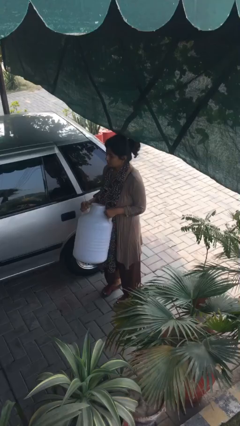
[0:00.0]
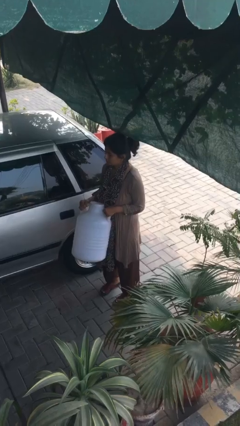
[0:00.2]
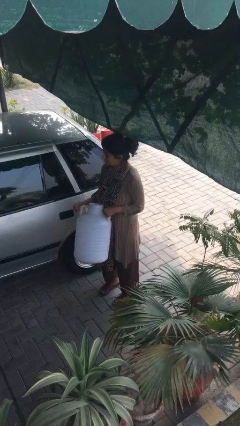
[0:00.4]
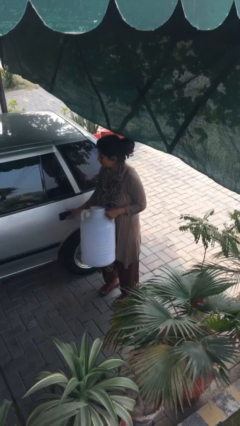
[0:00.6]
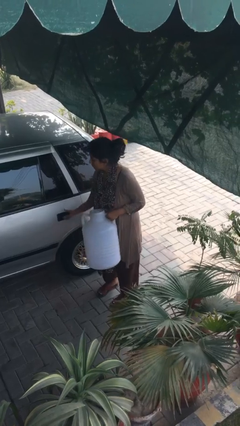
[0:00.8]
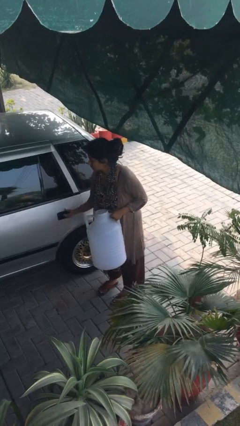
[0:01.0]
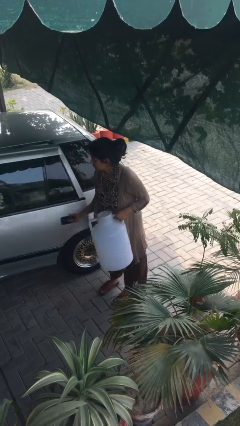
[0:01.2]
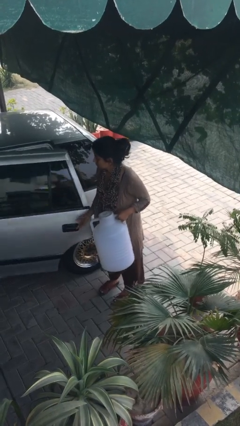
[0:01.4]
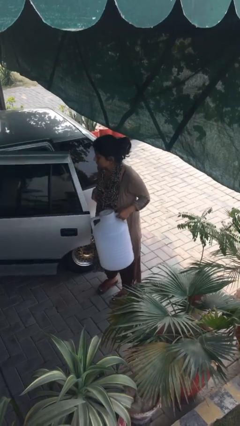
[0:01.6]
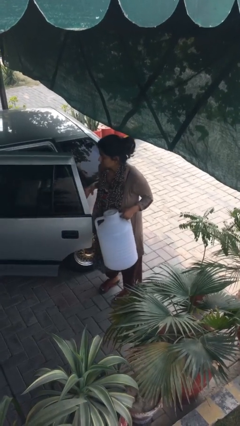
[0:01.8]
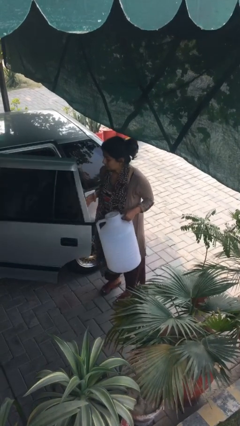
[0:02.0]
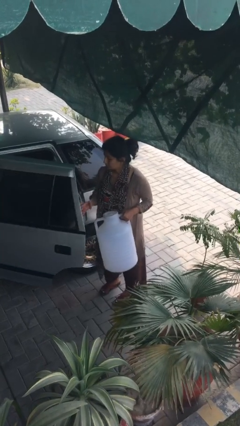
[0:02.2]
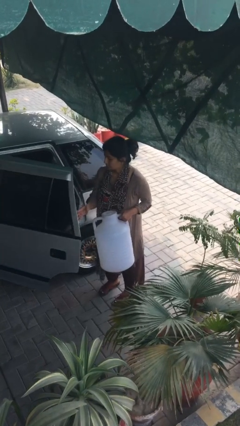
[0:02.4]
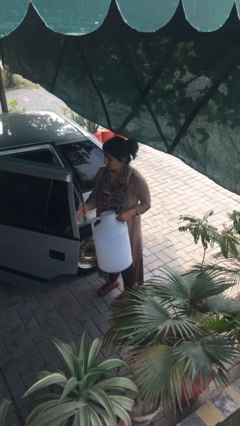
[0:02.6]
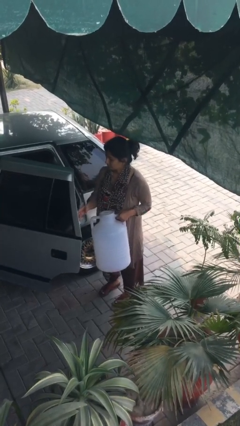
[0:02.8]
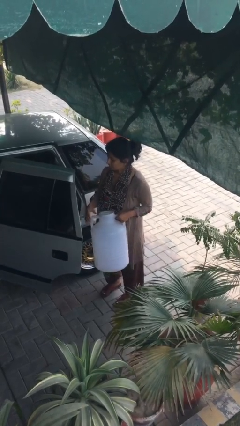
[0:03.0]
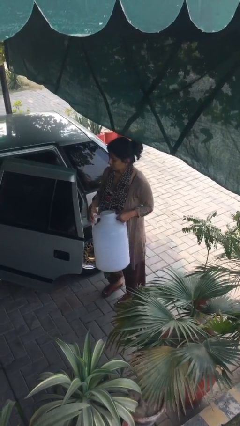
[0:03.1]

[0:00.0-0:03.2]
person opens car door

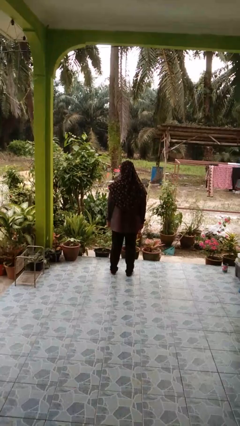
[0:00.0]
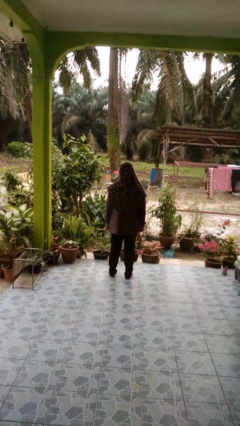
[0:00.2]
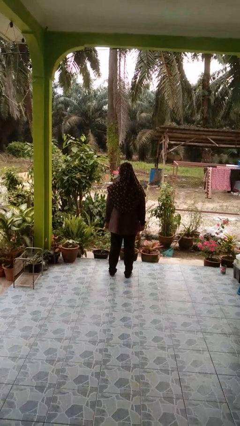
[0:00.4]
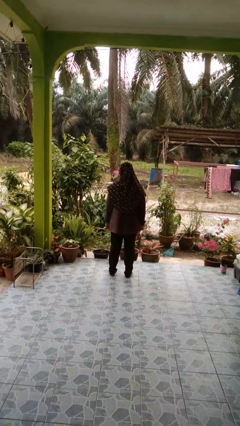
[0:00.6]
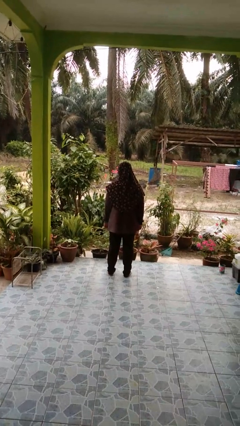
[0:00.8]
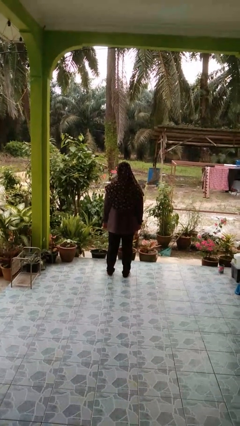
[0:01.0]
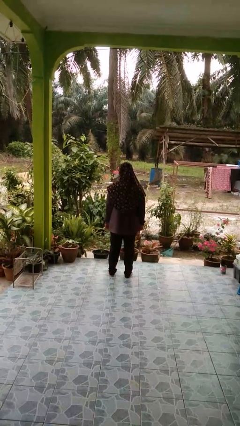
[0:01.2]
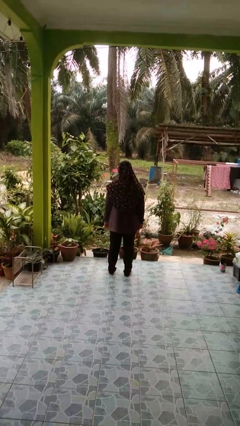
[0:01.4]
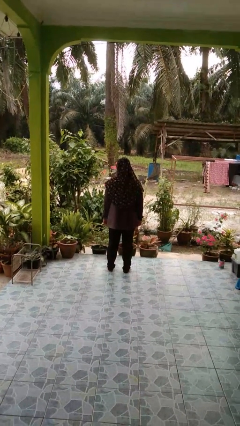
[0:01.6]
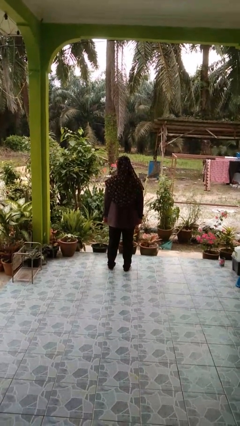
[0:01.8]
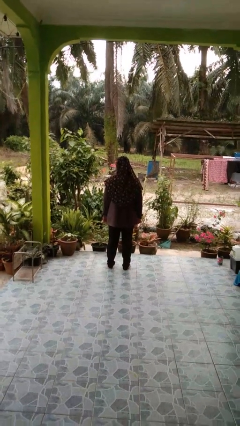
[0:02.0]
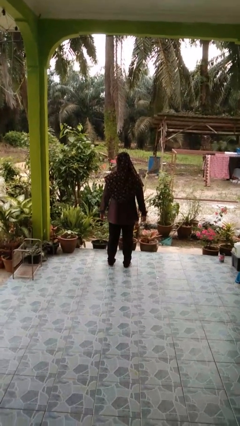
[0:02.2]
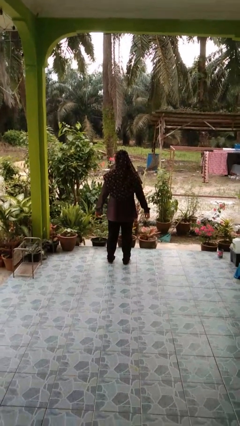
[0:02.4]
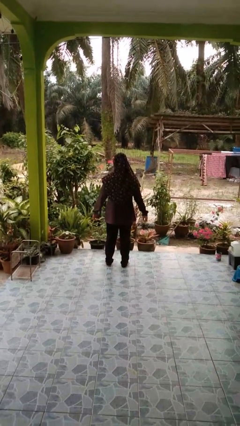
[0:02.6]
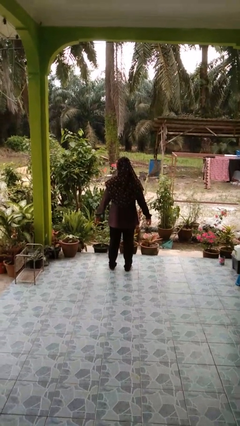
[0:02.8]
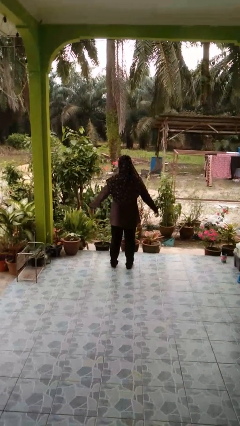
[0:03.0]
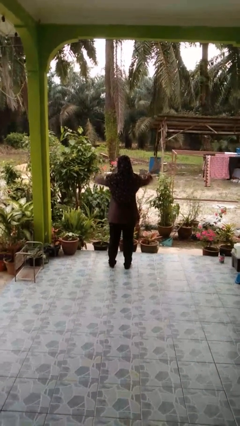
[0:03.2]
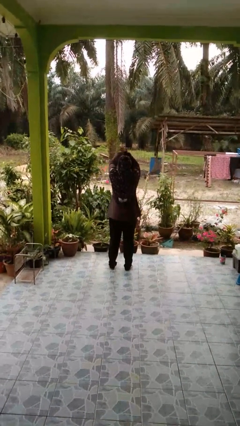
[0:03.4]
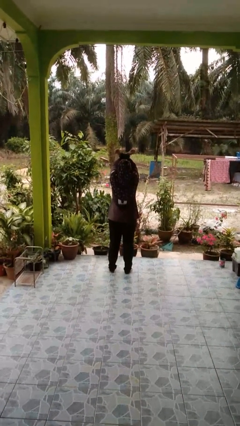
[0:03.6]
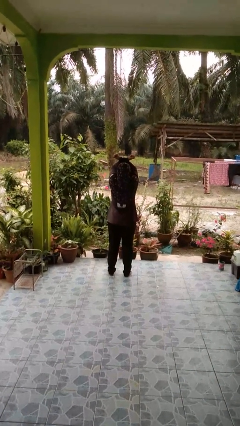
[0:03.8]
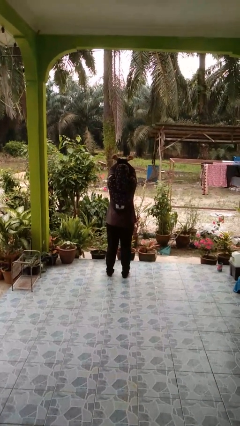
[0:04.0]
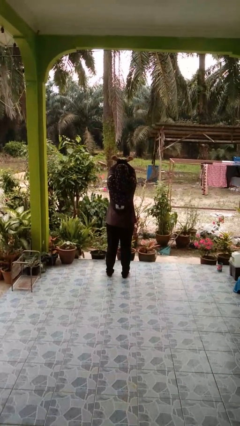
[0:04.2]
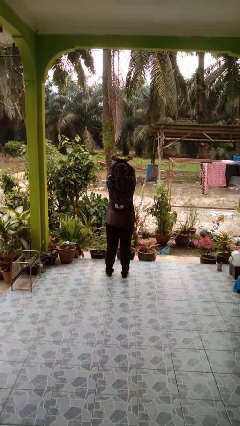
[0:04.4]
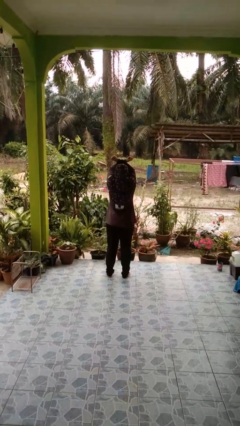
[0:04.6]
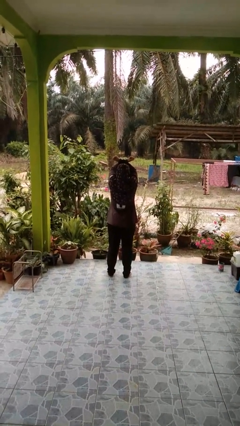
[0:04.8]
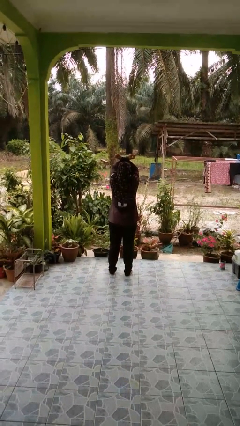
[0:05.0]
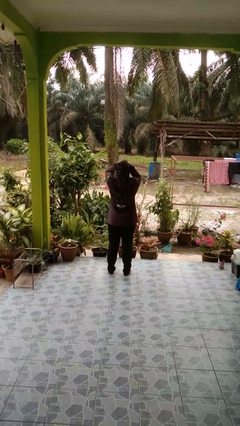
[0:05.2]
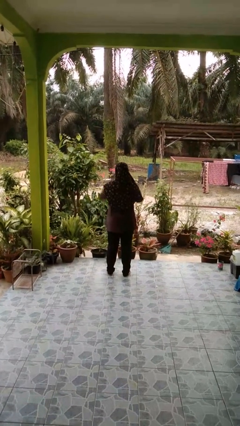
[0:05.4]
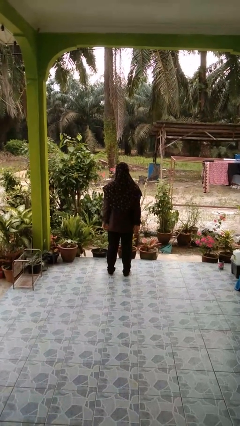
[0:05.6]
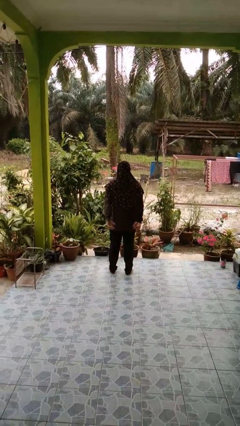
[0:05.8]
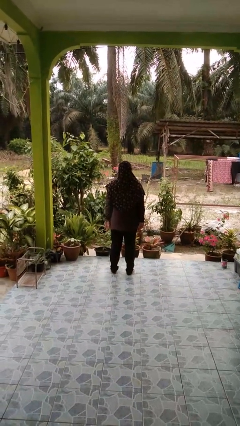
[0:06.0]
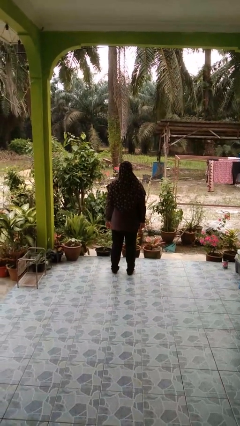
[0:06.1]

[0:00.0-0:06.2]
person crosses arms

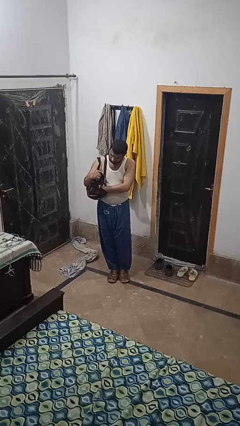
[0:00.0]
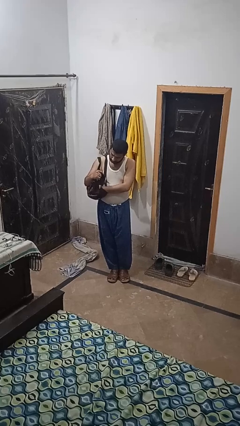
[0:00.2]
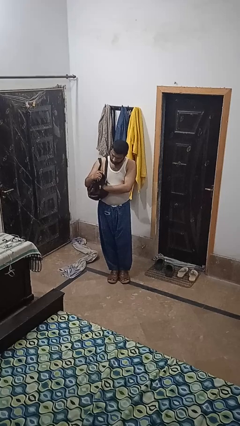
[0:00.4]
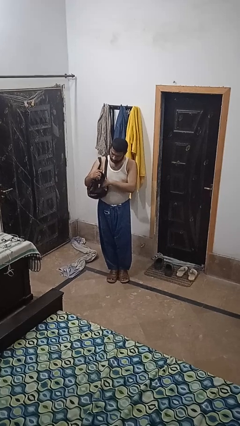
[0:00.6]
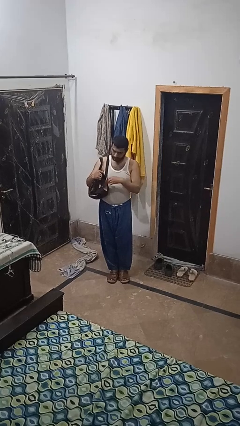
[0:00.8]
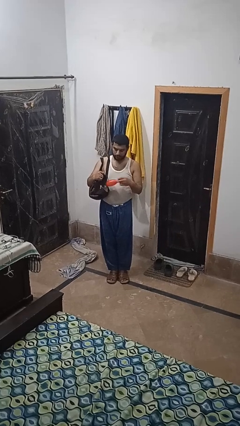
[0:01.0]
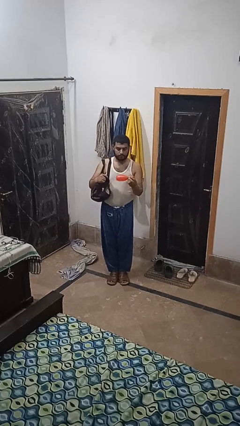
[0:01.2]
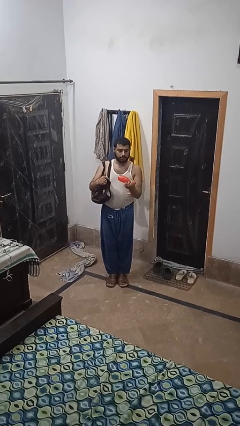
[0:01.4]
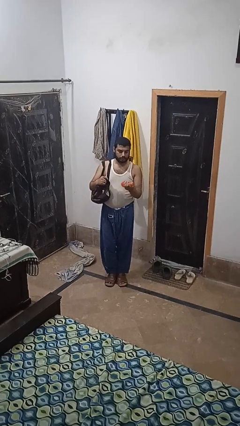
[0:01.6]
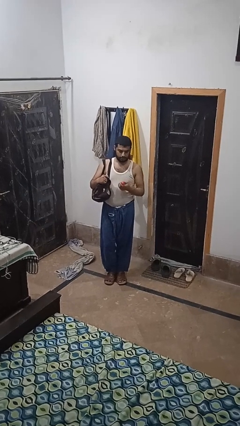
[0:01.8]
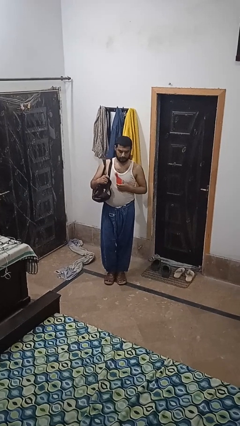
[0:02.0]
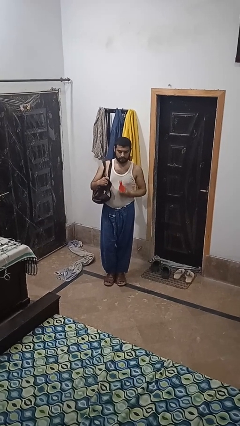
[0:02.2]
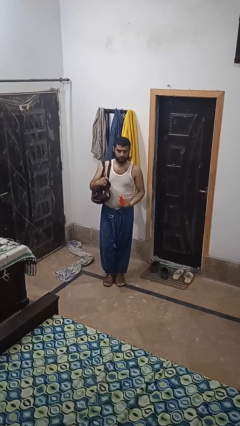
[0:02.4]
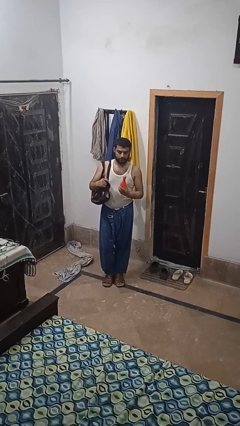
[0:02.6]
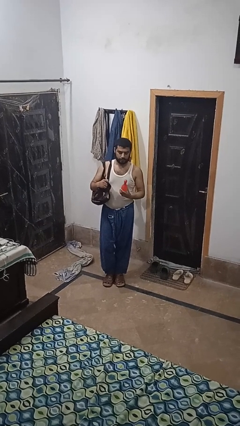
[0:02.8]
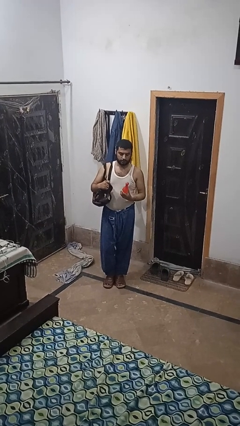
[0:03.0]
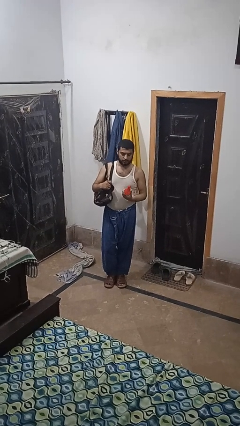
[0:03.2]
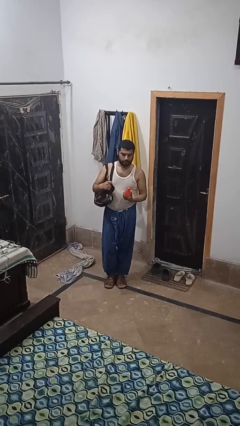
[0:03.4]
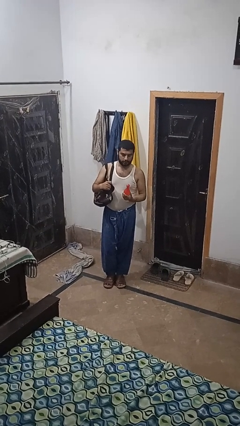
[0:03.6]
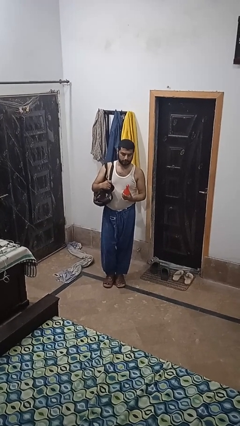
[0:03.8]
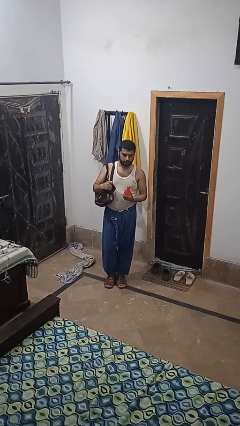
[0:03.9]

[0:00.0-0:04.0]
person takes object from purse

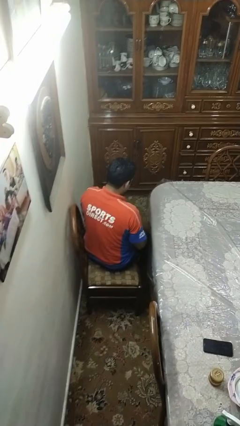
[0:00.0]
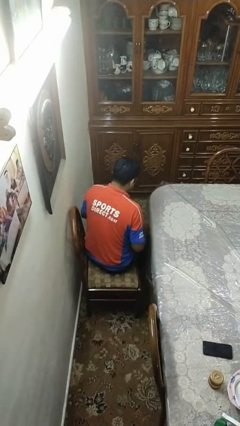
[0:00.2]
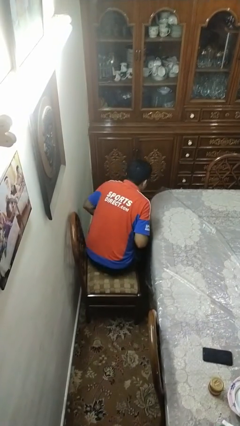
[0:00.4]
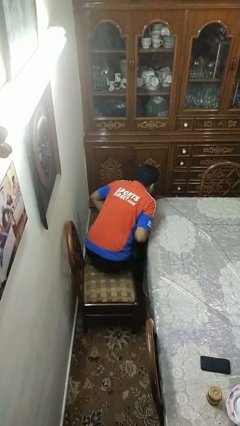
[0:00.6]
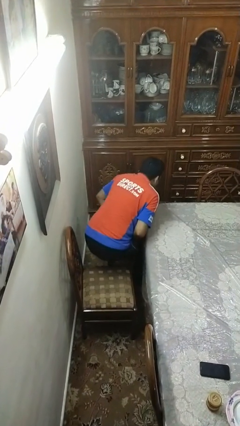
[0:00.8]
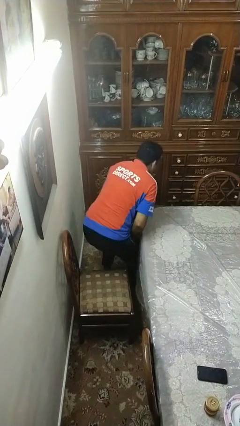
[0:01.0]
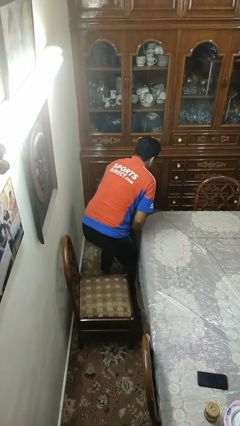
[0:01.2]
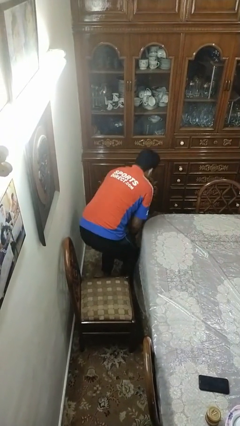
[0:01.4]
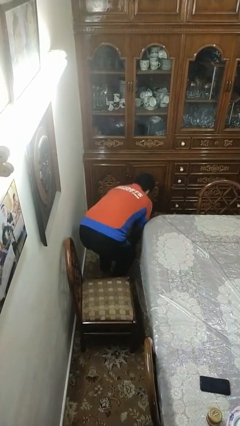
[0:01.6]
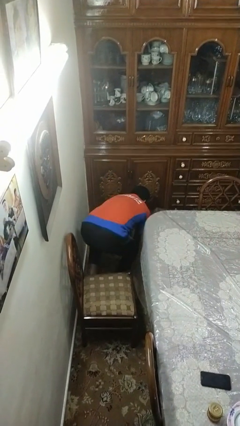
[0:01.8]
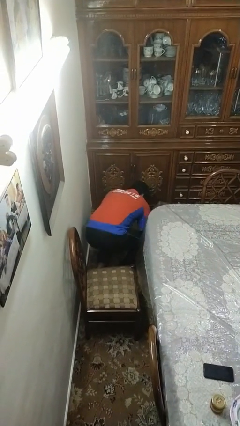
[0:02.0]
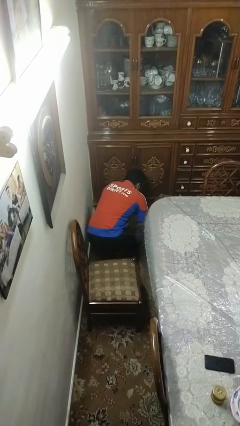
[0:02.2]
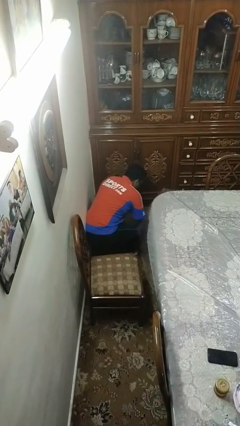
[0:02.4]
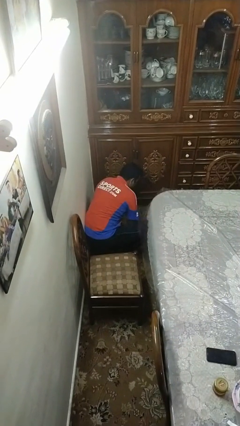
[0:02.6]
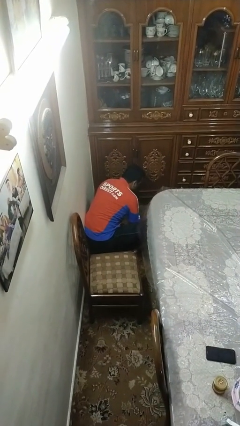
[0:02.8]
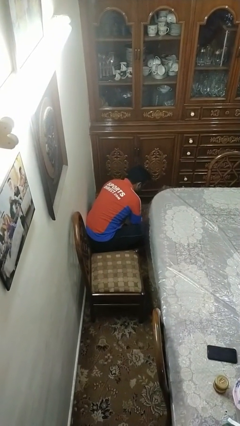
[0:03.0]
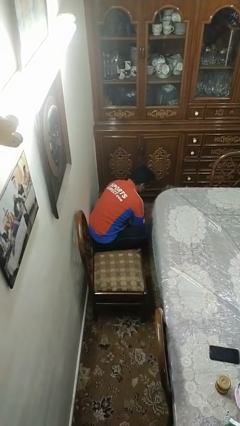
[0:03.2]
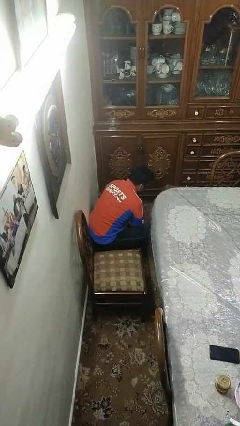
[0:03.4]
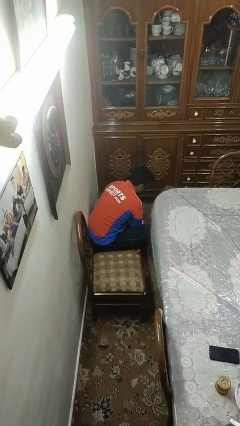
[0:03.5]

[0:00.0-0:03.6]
person falls from chair

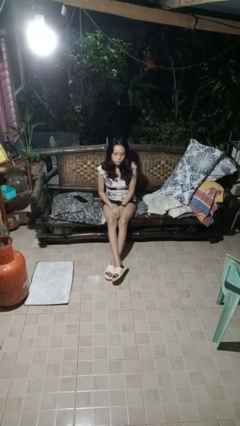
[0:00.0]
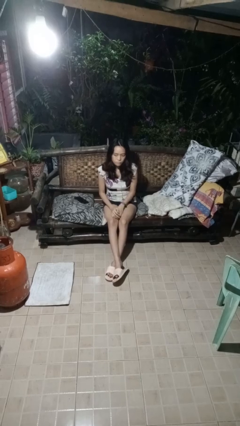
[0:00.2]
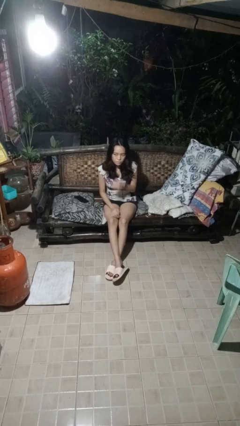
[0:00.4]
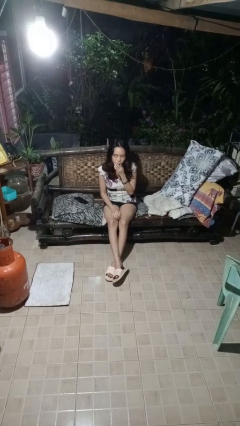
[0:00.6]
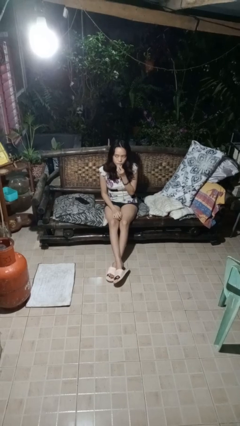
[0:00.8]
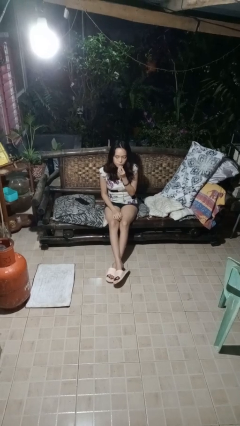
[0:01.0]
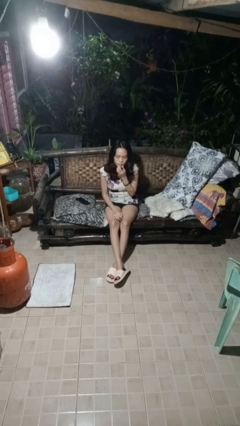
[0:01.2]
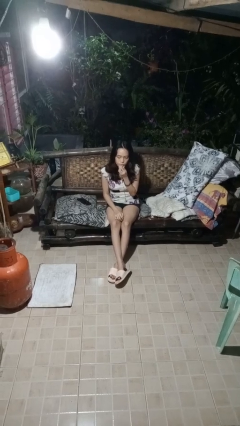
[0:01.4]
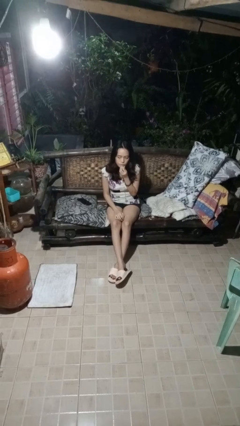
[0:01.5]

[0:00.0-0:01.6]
person strokes chin
